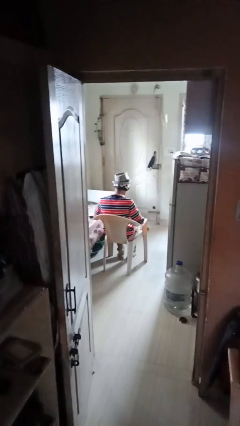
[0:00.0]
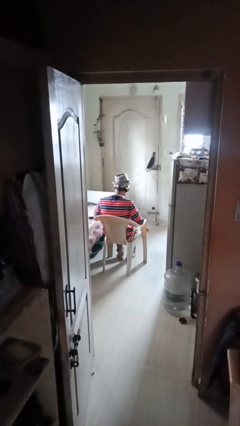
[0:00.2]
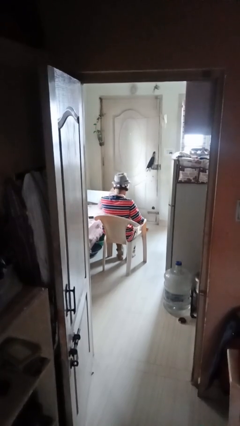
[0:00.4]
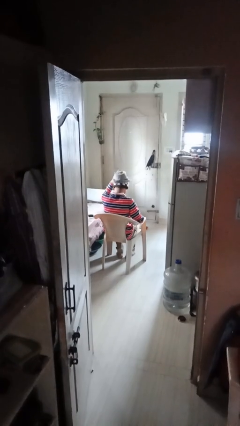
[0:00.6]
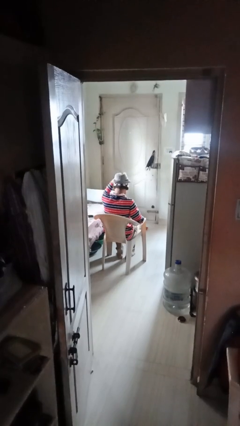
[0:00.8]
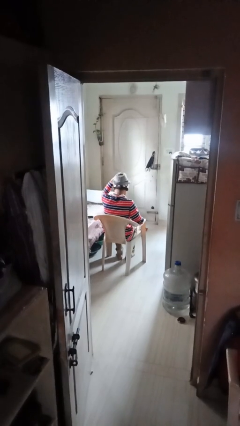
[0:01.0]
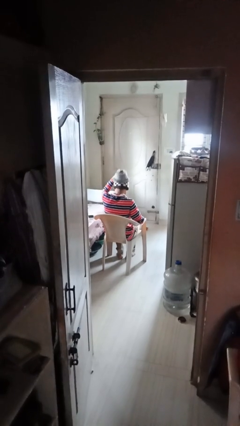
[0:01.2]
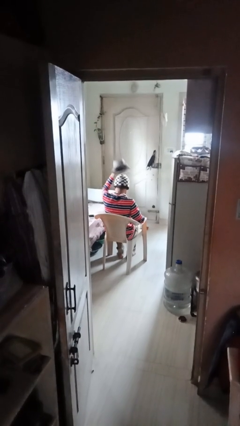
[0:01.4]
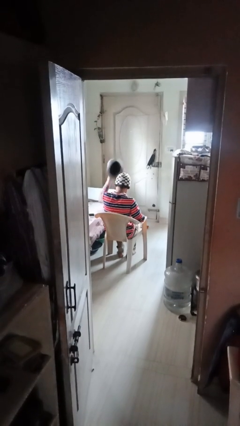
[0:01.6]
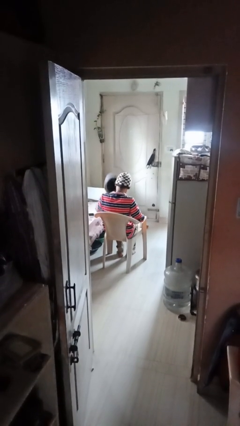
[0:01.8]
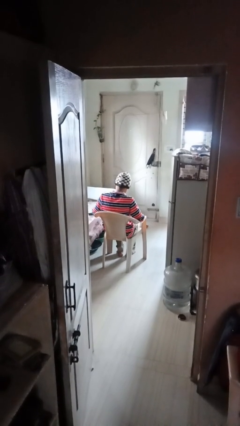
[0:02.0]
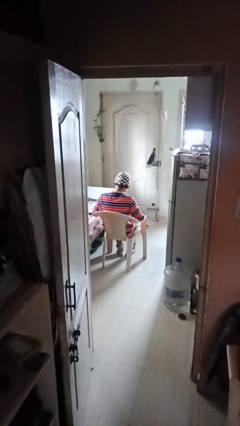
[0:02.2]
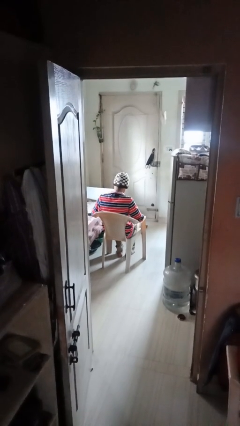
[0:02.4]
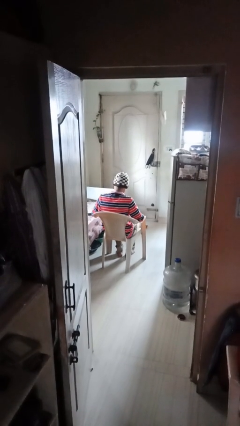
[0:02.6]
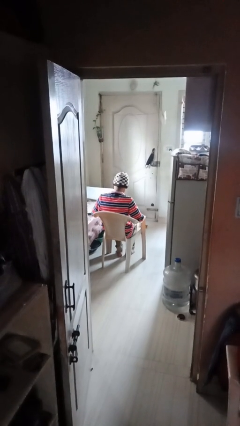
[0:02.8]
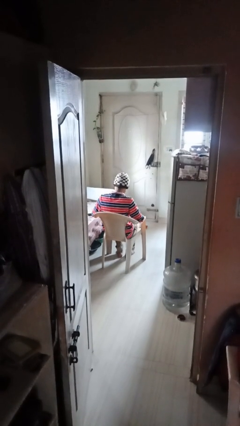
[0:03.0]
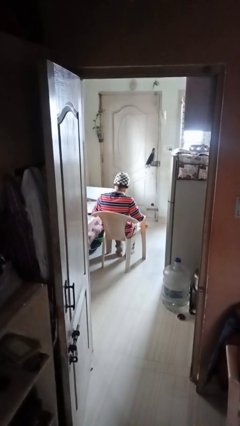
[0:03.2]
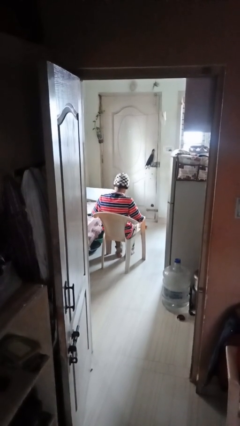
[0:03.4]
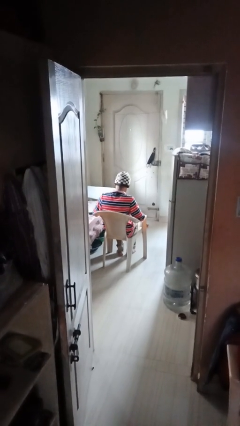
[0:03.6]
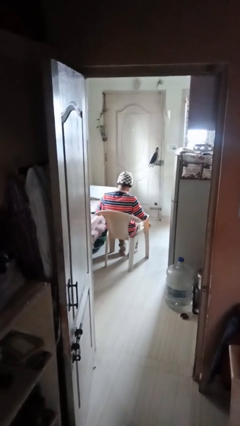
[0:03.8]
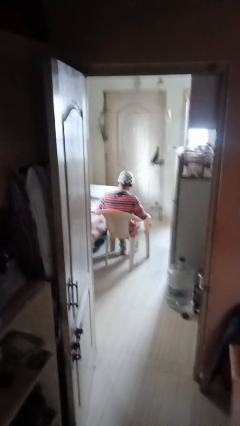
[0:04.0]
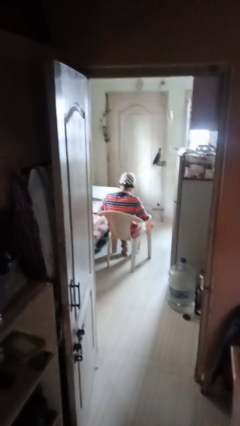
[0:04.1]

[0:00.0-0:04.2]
person takes off hat

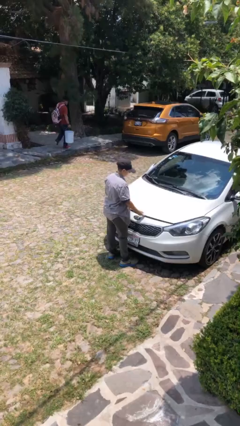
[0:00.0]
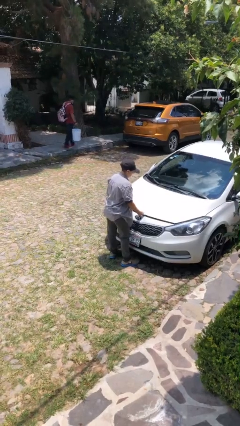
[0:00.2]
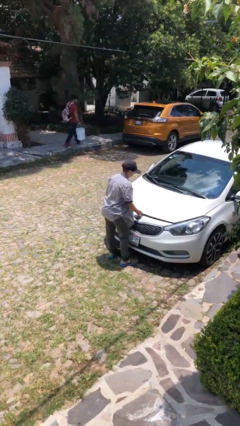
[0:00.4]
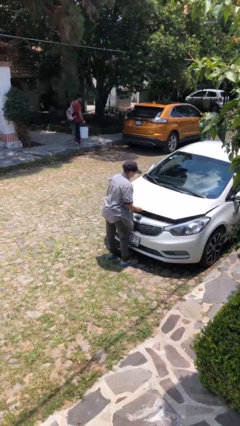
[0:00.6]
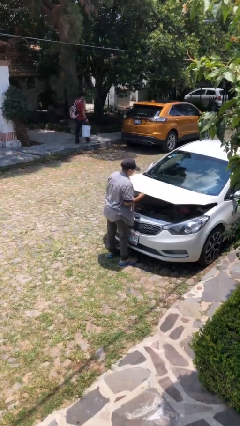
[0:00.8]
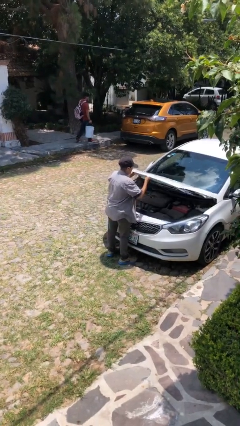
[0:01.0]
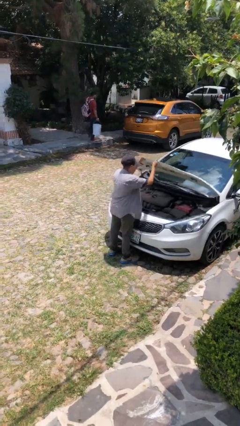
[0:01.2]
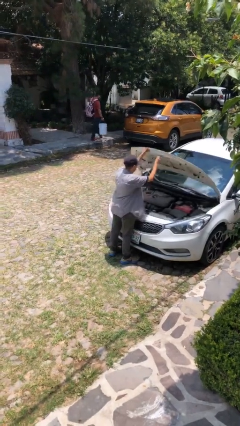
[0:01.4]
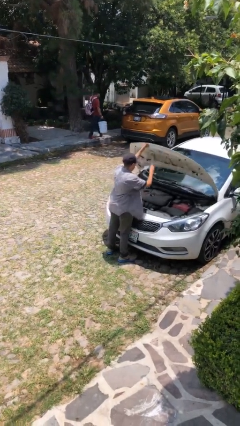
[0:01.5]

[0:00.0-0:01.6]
person opens car hood

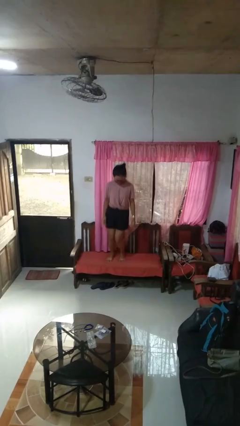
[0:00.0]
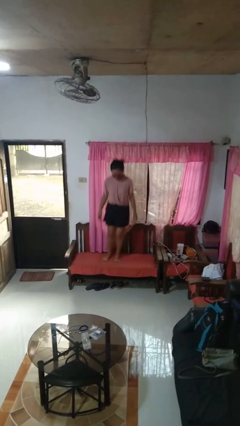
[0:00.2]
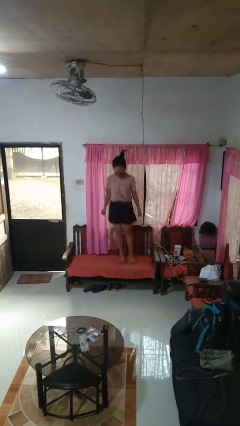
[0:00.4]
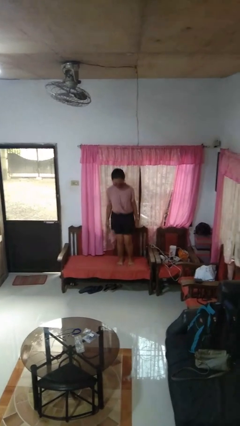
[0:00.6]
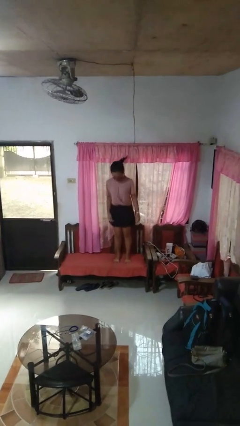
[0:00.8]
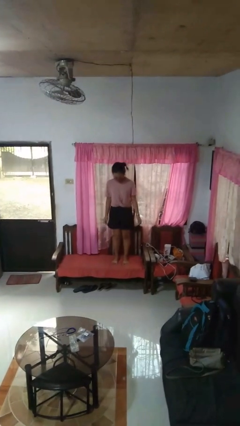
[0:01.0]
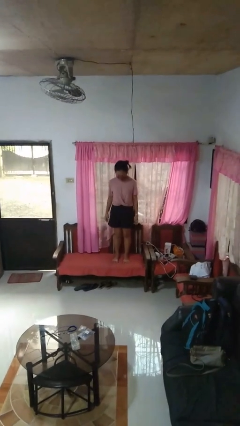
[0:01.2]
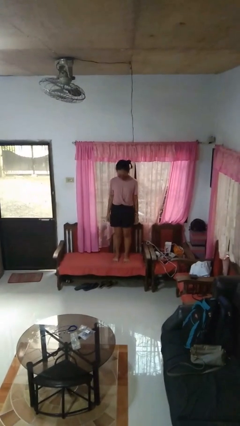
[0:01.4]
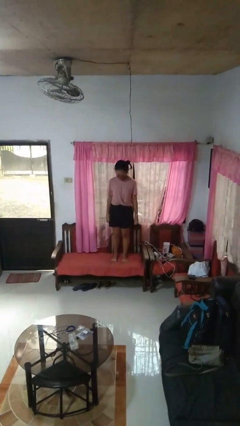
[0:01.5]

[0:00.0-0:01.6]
person jumps on couch

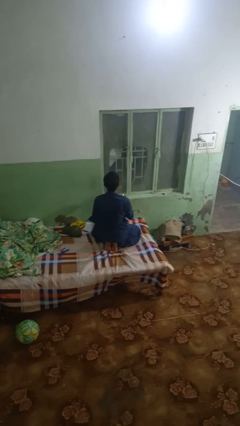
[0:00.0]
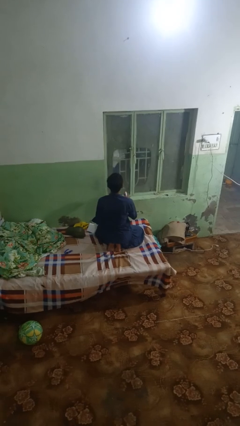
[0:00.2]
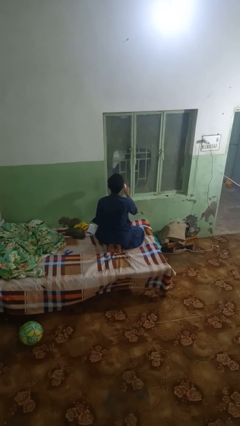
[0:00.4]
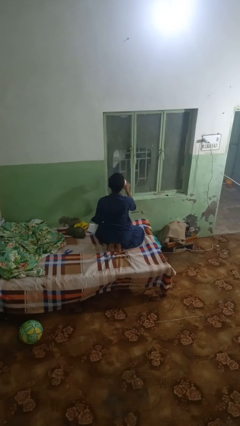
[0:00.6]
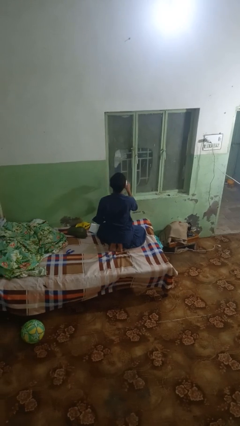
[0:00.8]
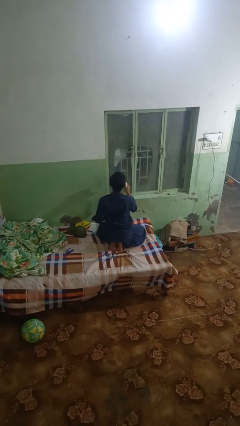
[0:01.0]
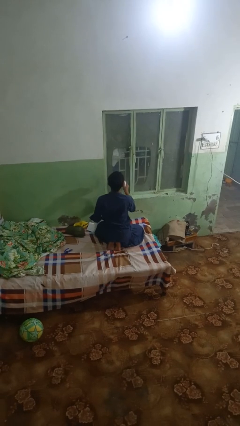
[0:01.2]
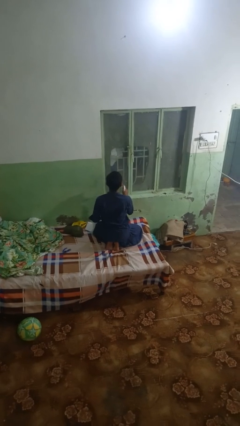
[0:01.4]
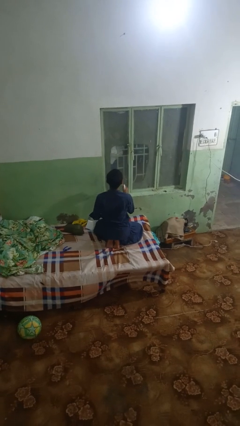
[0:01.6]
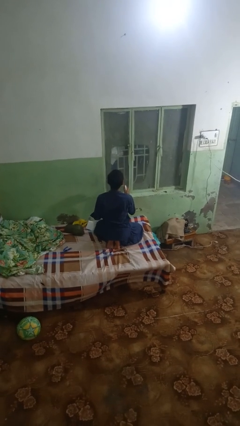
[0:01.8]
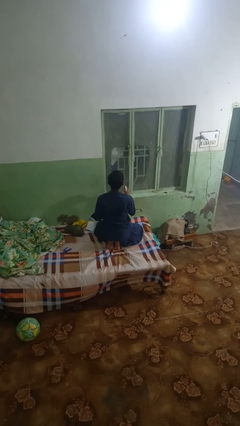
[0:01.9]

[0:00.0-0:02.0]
person sprays from bottle

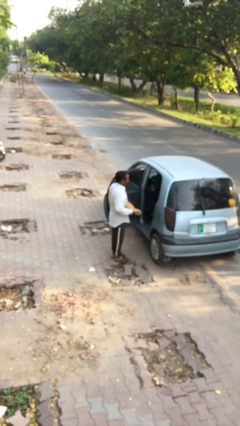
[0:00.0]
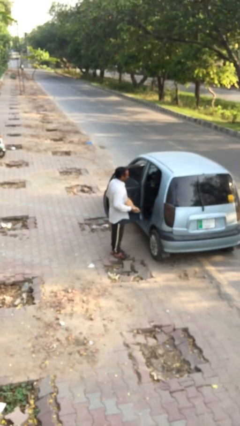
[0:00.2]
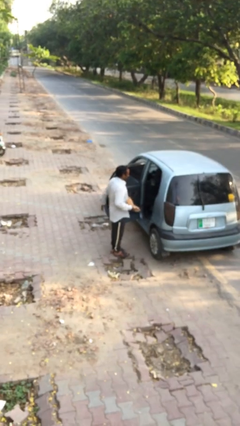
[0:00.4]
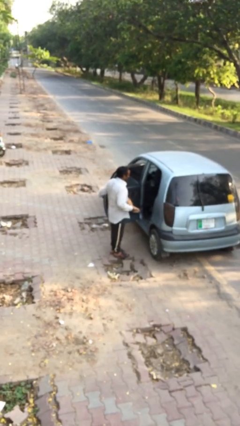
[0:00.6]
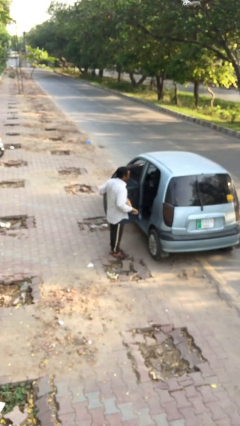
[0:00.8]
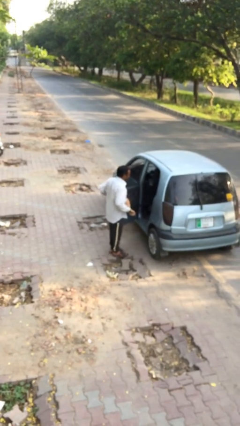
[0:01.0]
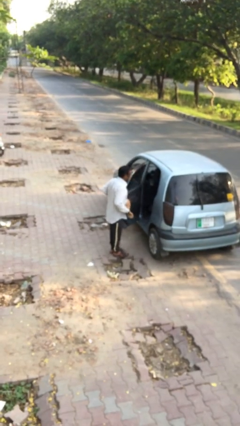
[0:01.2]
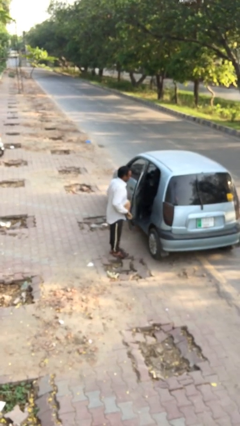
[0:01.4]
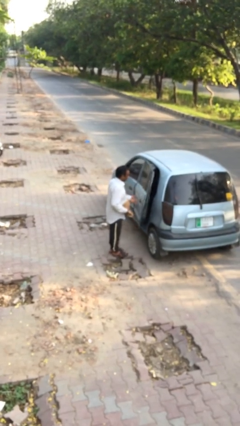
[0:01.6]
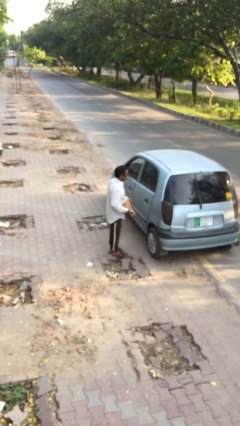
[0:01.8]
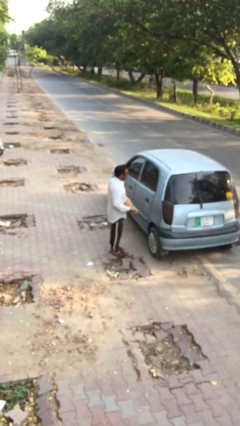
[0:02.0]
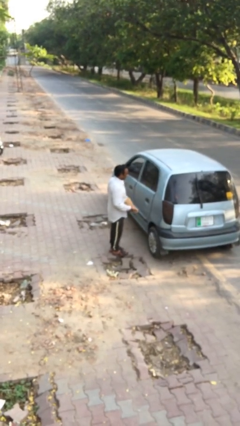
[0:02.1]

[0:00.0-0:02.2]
person closes car door

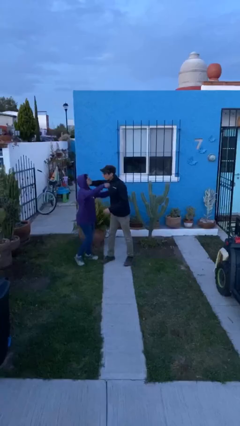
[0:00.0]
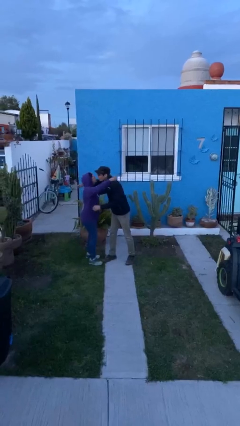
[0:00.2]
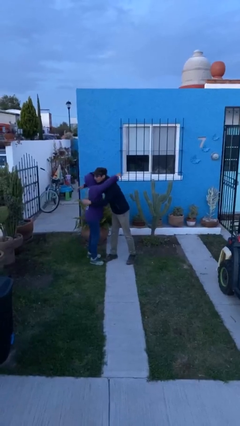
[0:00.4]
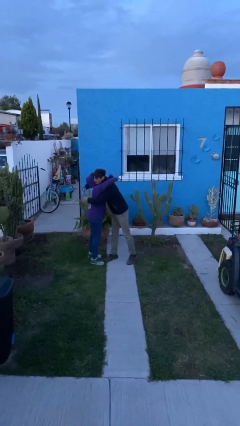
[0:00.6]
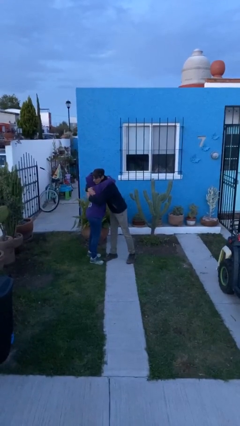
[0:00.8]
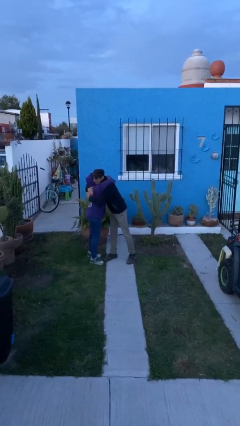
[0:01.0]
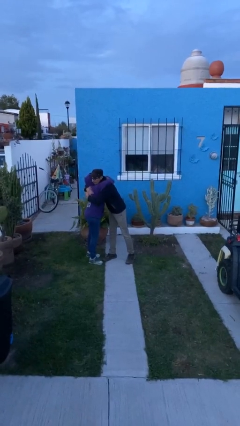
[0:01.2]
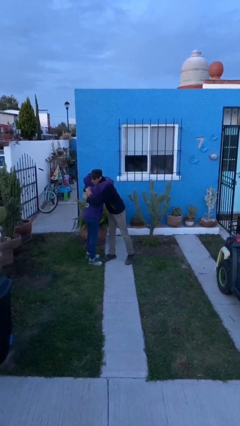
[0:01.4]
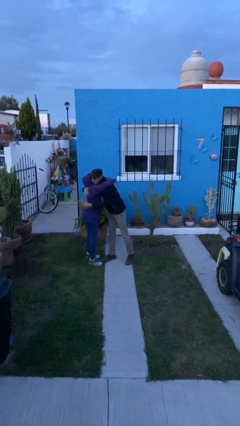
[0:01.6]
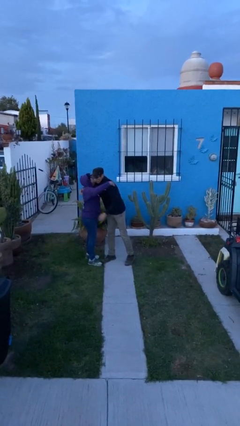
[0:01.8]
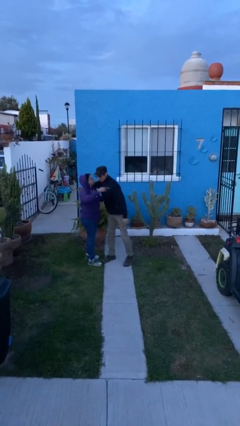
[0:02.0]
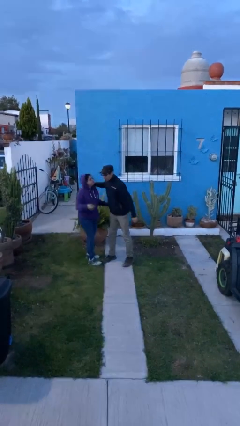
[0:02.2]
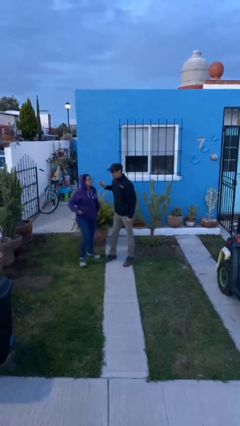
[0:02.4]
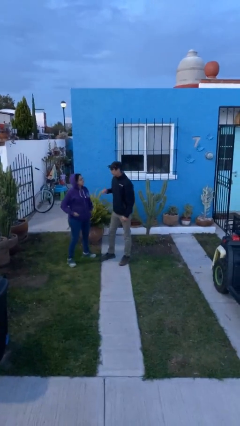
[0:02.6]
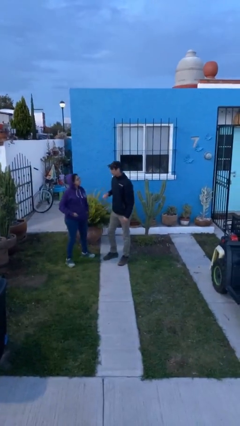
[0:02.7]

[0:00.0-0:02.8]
person embraces person

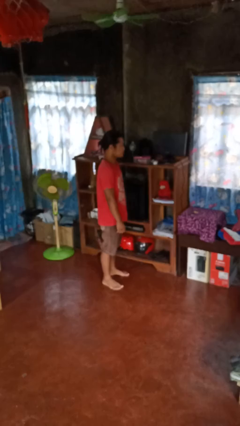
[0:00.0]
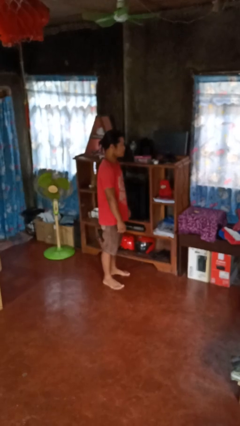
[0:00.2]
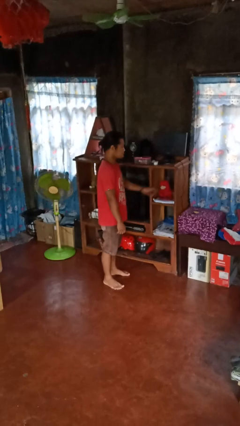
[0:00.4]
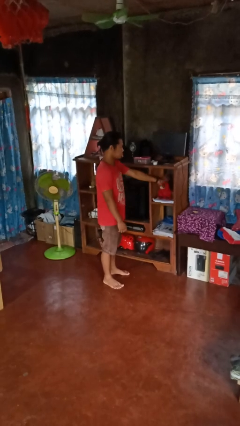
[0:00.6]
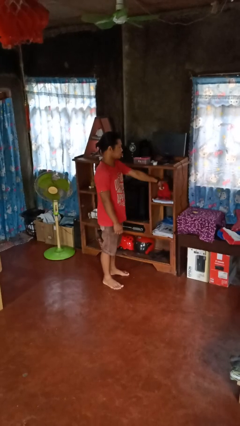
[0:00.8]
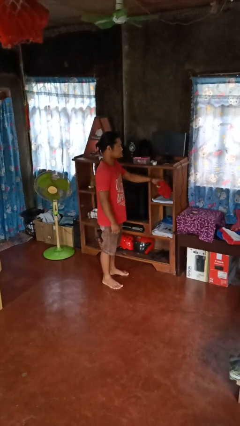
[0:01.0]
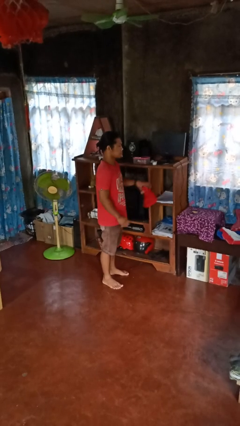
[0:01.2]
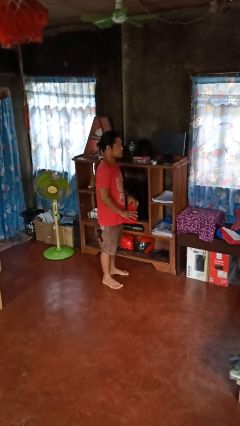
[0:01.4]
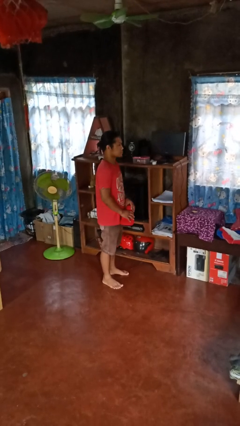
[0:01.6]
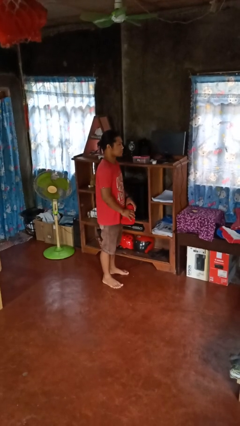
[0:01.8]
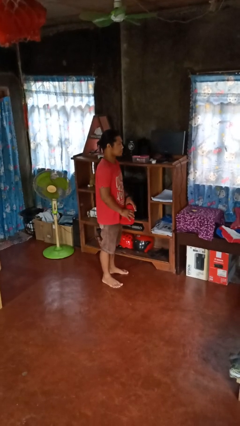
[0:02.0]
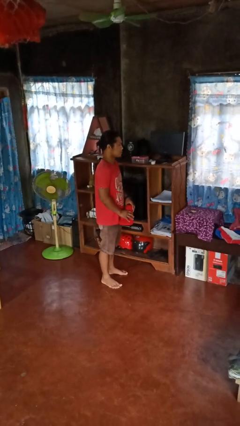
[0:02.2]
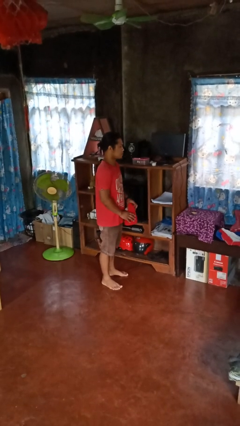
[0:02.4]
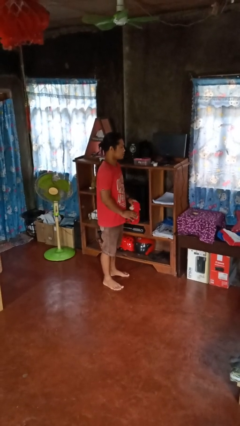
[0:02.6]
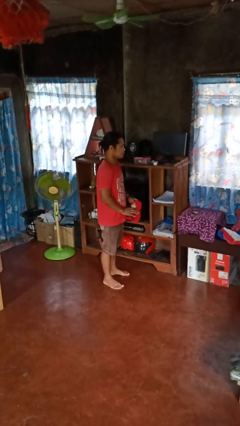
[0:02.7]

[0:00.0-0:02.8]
person picks up object from shelf
